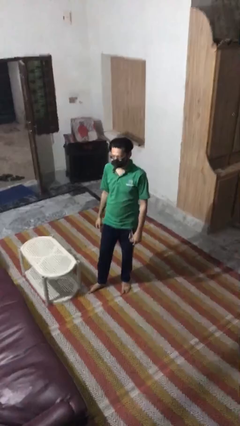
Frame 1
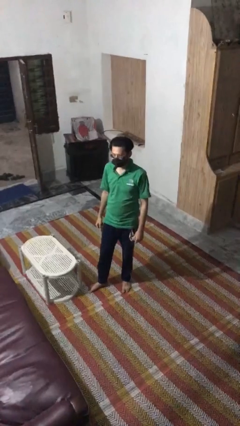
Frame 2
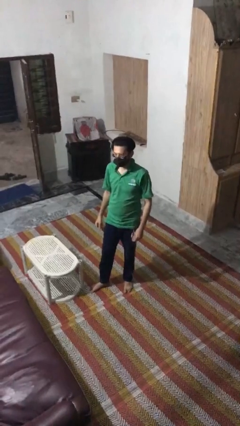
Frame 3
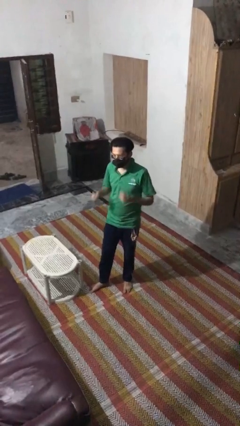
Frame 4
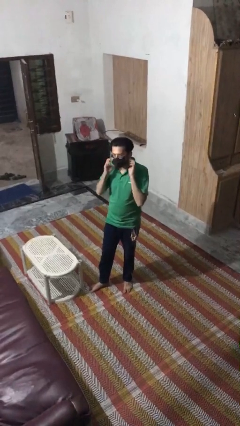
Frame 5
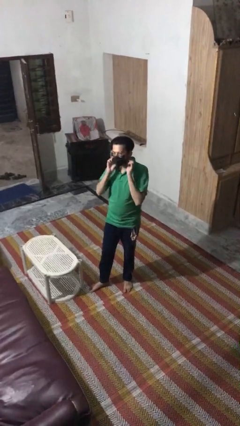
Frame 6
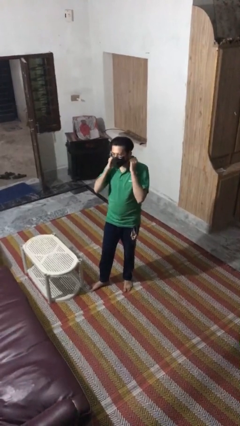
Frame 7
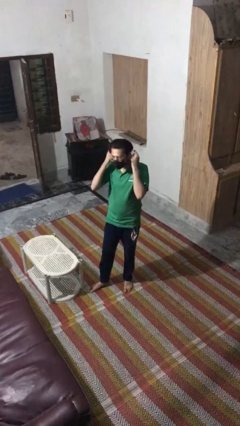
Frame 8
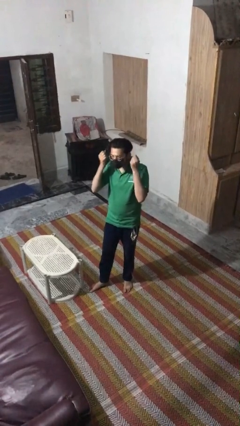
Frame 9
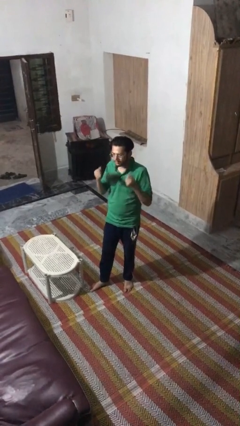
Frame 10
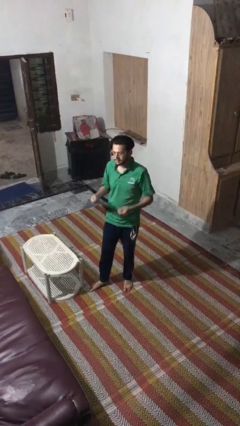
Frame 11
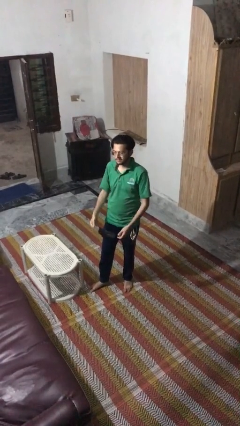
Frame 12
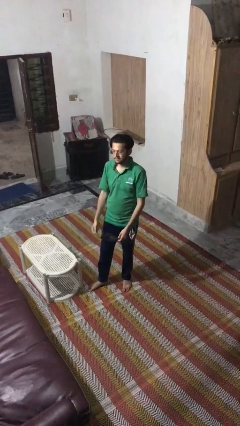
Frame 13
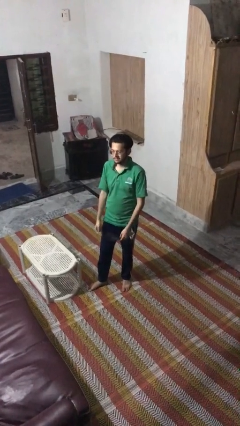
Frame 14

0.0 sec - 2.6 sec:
person takes off facemask

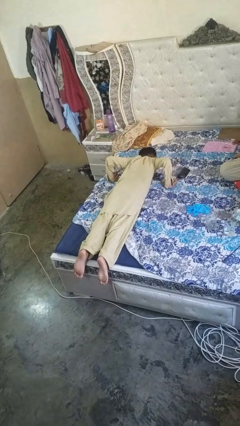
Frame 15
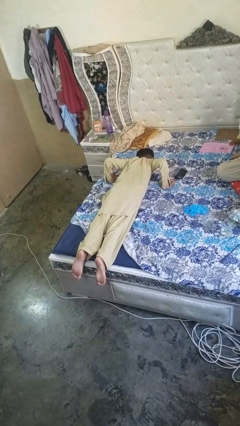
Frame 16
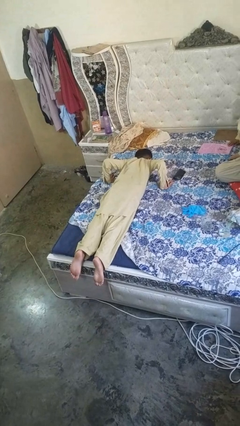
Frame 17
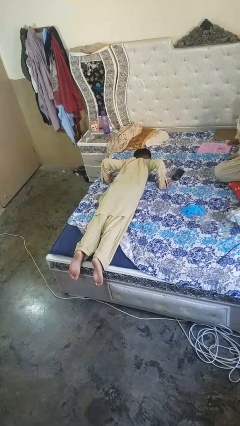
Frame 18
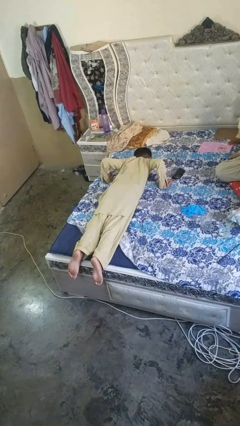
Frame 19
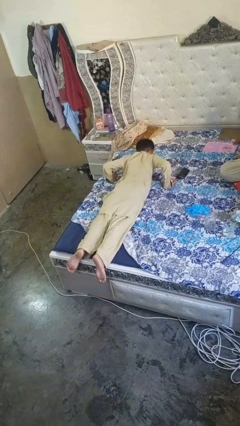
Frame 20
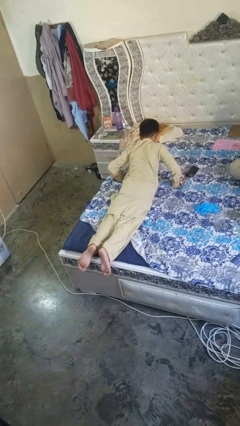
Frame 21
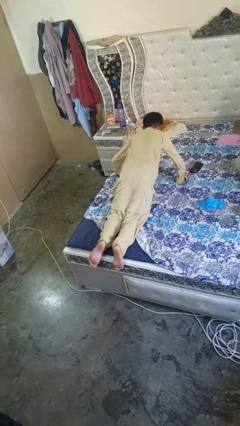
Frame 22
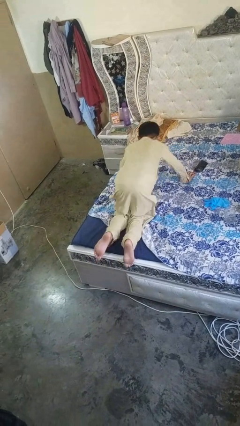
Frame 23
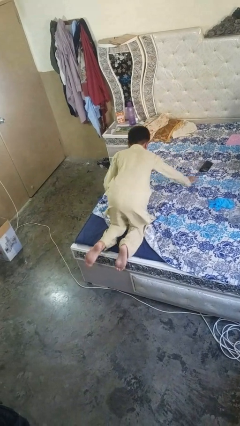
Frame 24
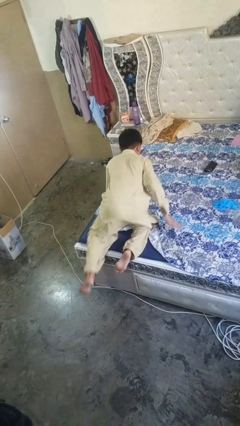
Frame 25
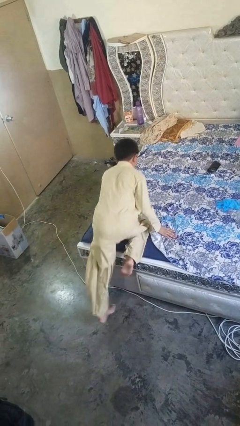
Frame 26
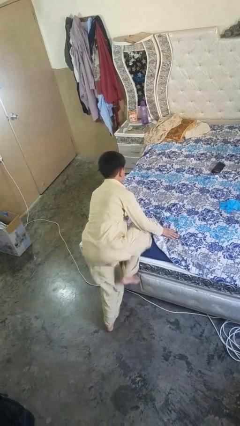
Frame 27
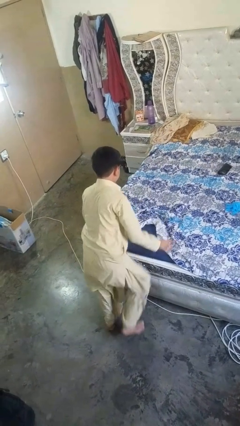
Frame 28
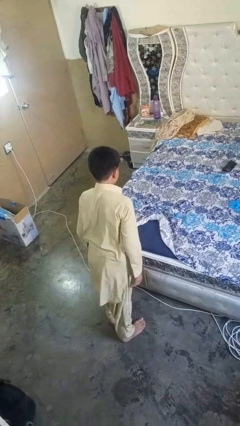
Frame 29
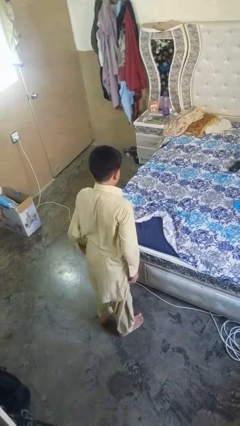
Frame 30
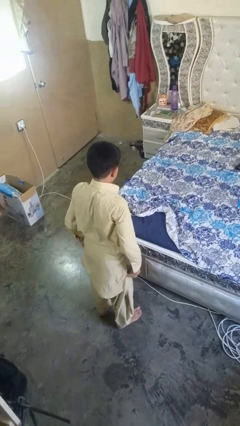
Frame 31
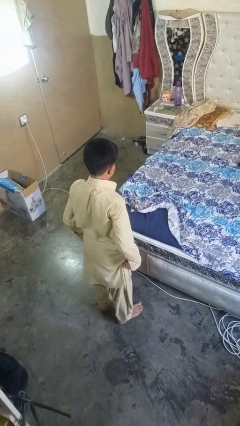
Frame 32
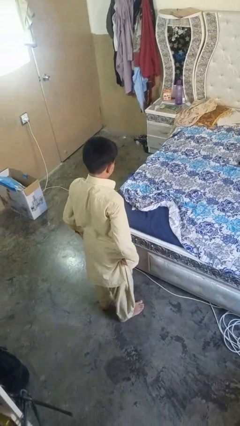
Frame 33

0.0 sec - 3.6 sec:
person stands up

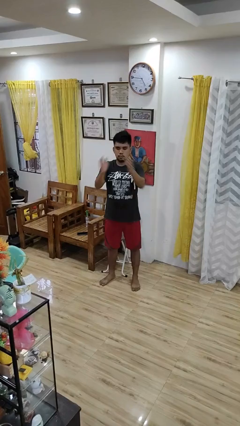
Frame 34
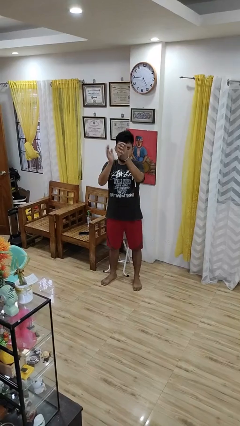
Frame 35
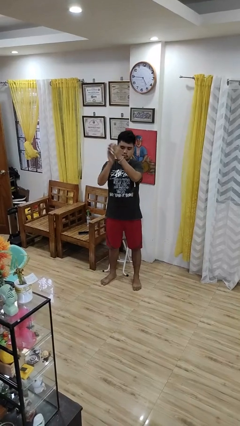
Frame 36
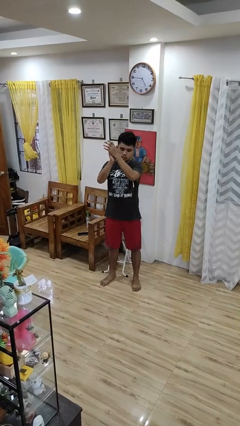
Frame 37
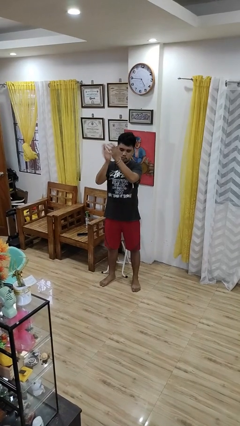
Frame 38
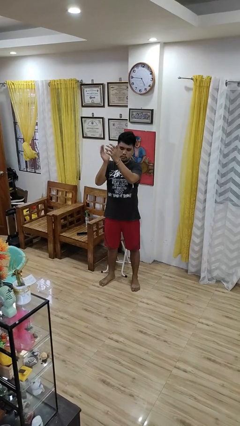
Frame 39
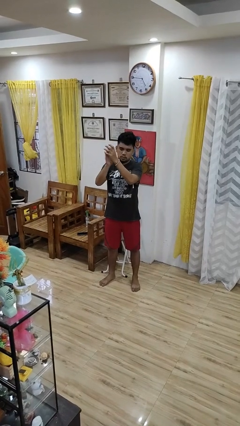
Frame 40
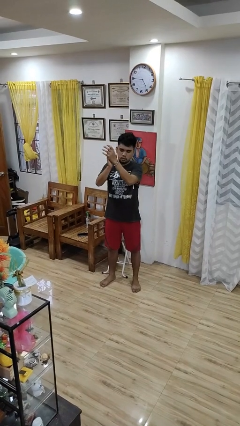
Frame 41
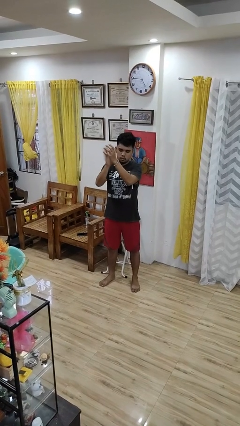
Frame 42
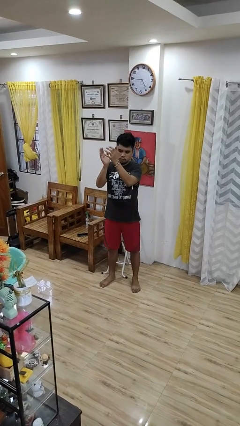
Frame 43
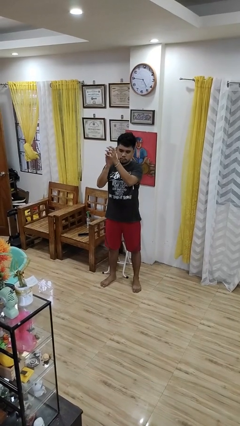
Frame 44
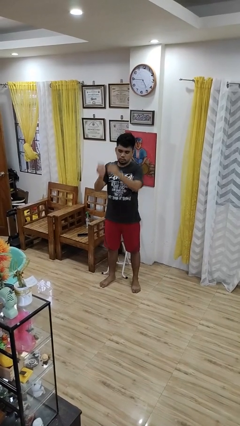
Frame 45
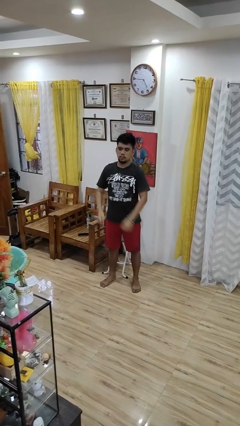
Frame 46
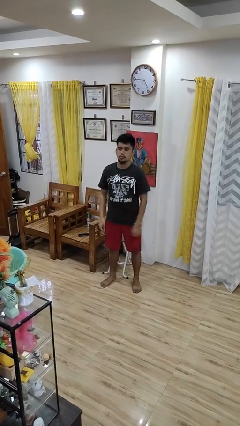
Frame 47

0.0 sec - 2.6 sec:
person claps hands

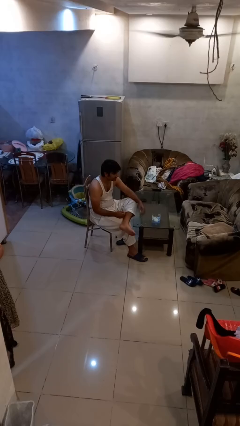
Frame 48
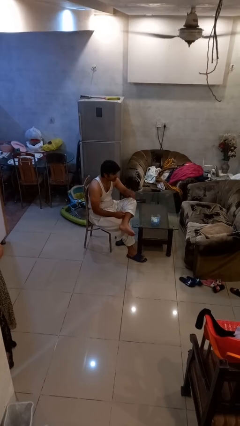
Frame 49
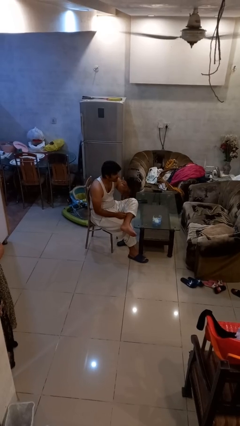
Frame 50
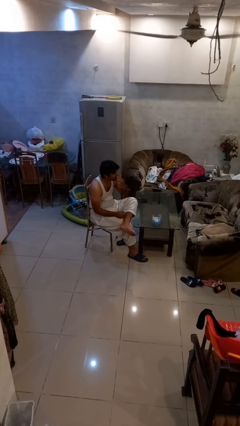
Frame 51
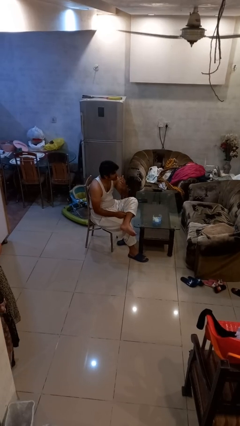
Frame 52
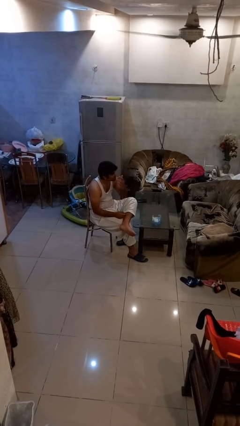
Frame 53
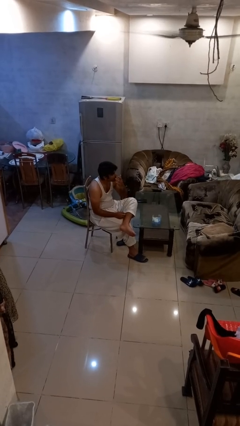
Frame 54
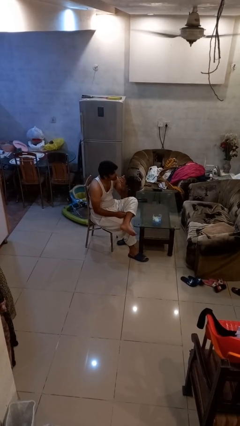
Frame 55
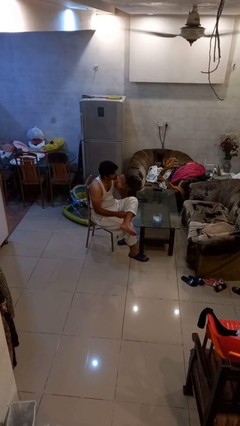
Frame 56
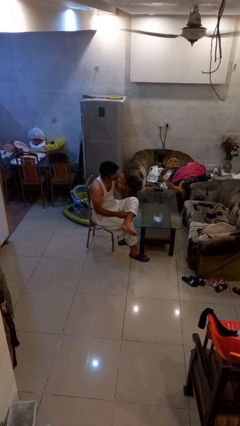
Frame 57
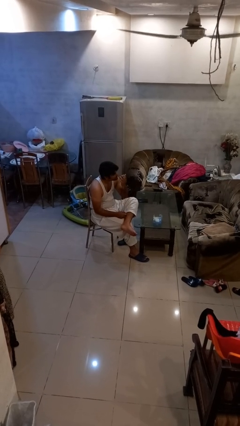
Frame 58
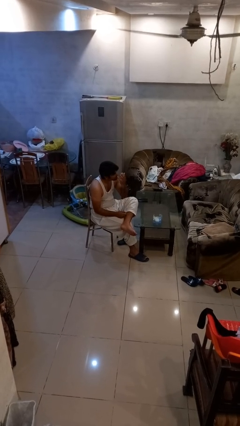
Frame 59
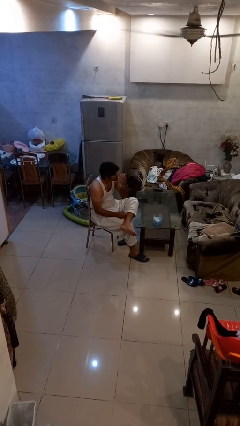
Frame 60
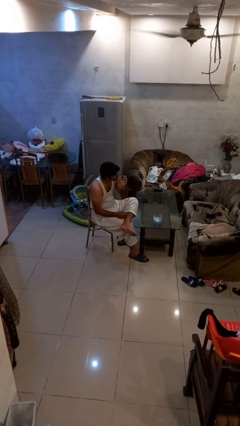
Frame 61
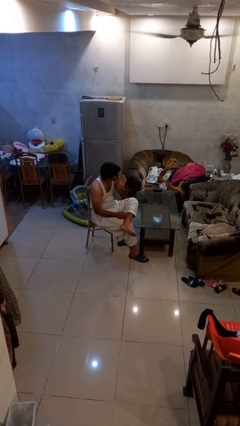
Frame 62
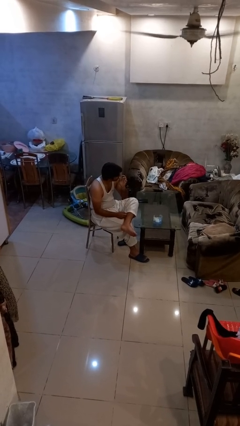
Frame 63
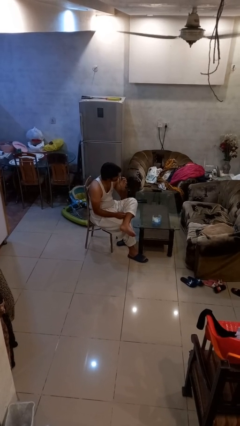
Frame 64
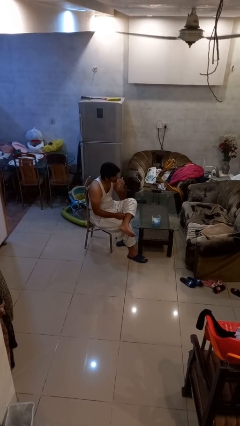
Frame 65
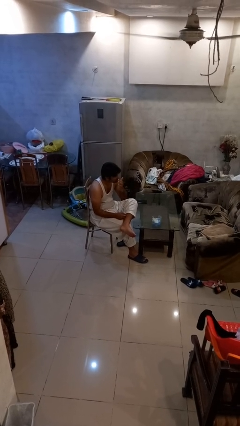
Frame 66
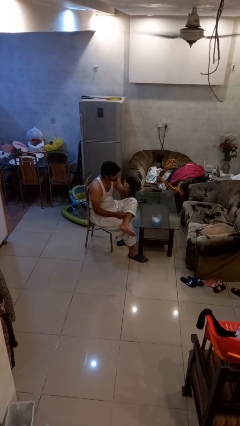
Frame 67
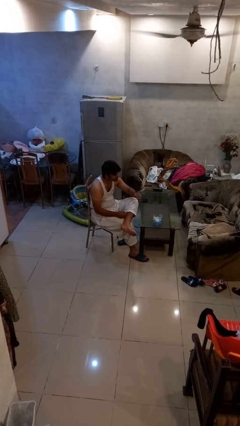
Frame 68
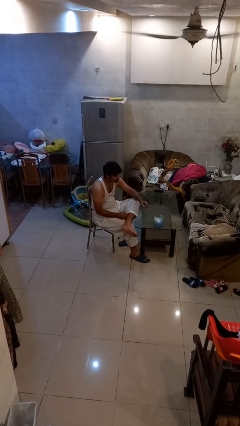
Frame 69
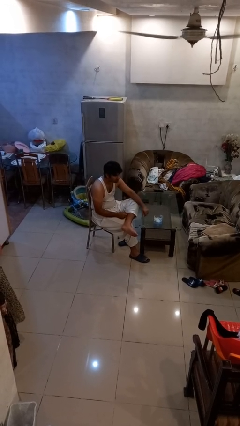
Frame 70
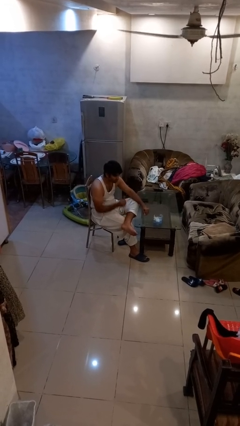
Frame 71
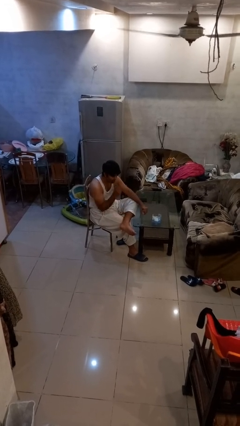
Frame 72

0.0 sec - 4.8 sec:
person licks fingers

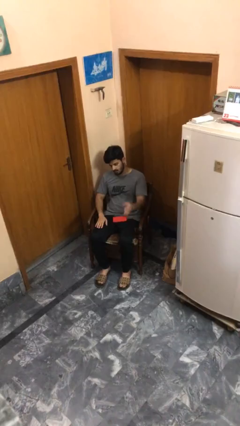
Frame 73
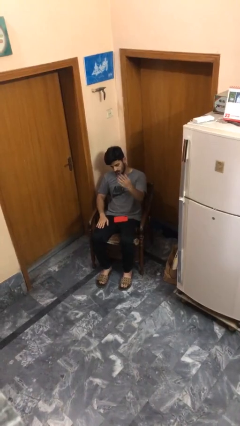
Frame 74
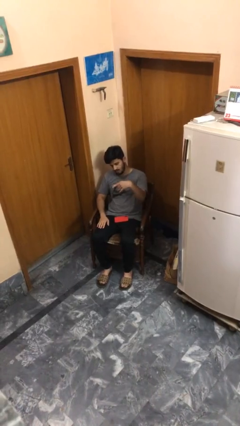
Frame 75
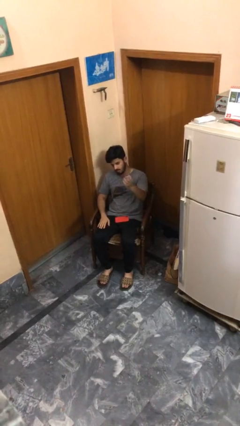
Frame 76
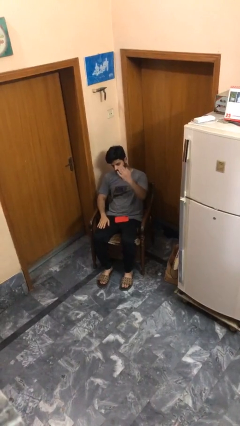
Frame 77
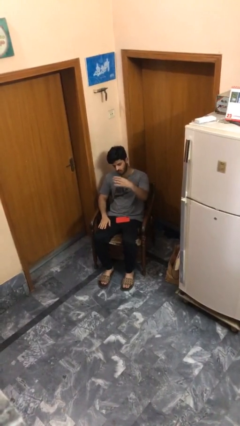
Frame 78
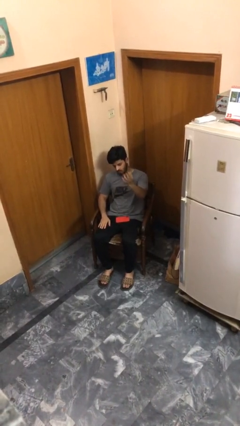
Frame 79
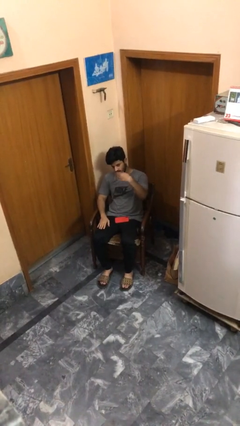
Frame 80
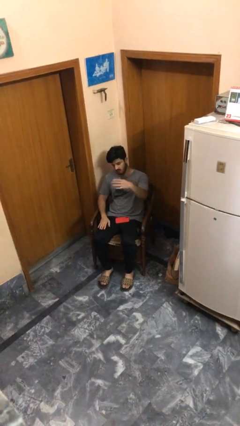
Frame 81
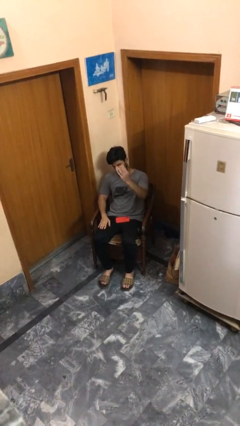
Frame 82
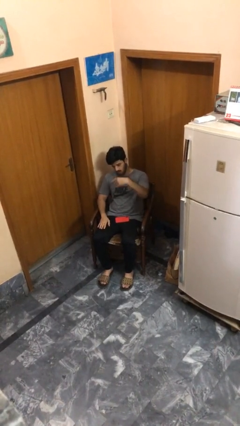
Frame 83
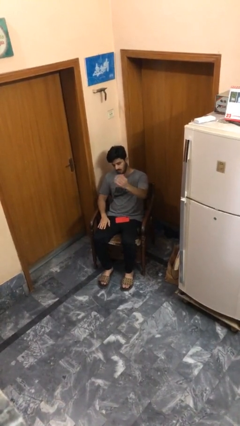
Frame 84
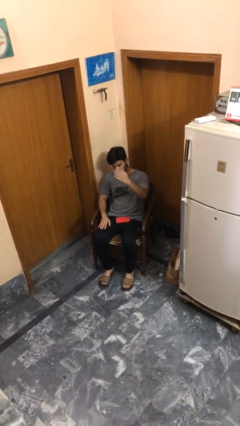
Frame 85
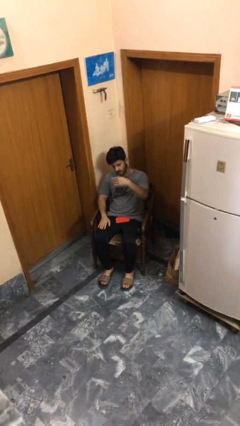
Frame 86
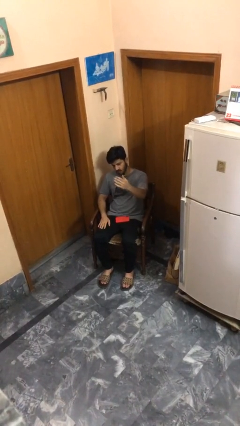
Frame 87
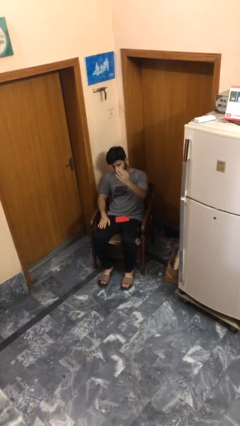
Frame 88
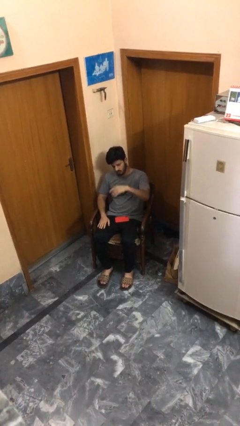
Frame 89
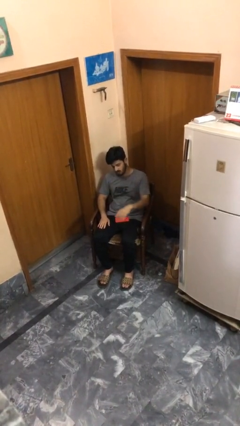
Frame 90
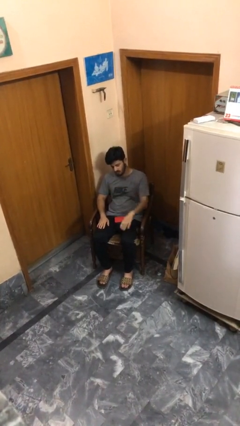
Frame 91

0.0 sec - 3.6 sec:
person gestures come here

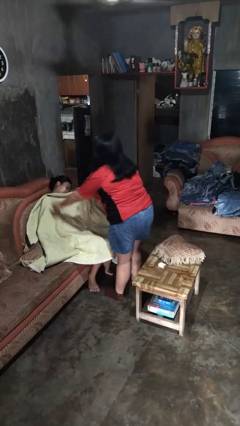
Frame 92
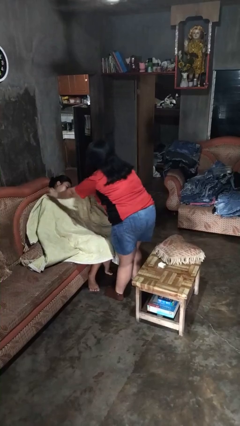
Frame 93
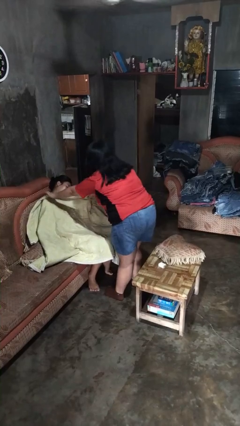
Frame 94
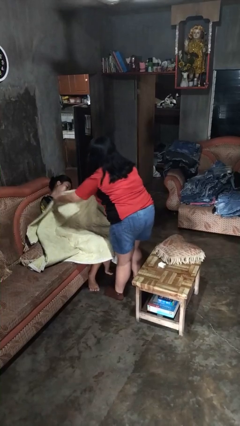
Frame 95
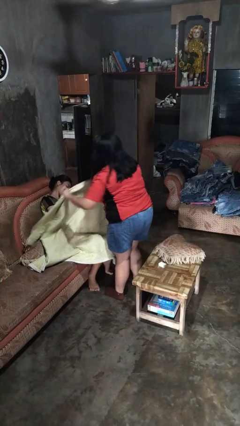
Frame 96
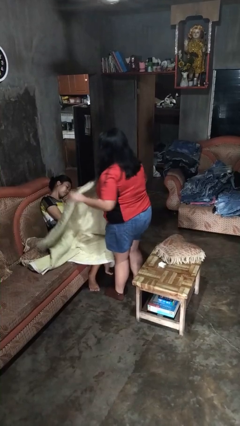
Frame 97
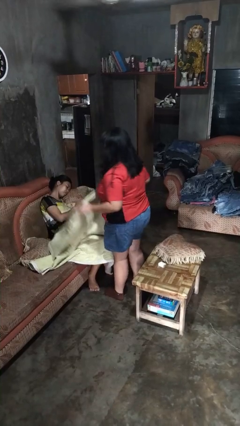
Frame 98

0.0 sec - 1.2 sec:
person uncovers friend with blanket
